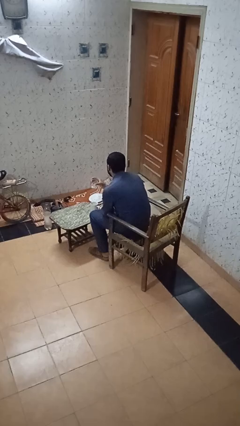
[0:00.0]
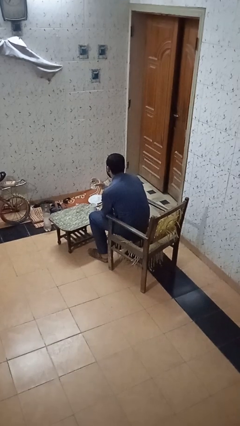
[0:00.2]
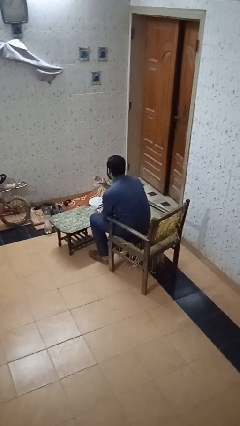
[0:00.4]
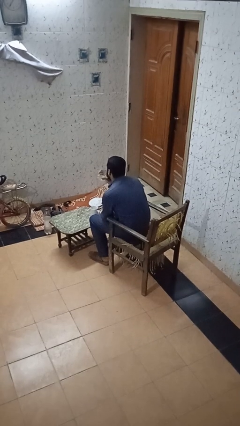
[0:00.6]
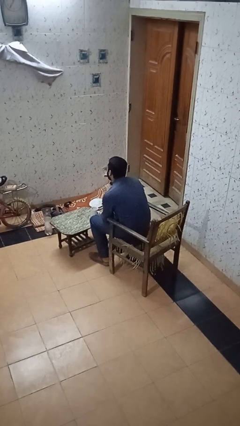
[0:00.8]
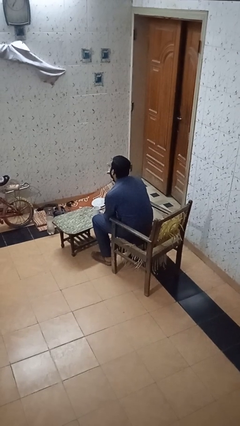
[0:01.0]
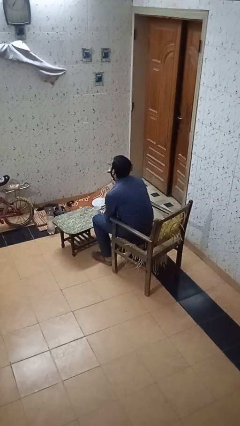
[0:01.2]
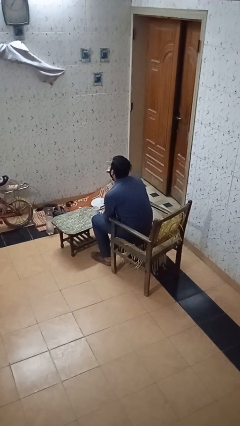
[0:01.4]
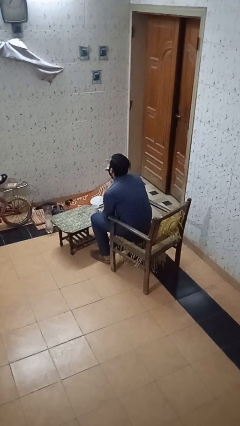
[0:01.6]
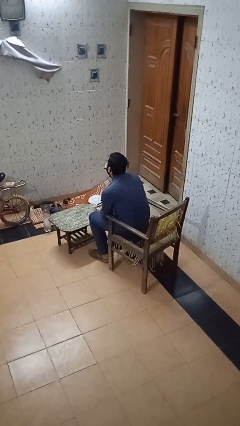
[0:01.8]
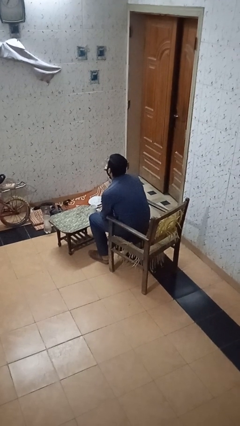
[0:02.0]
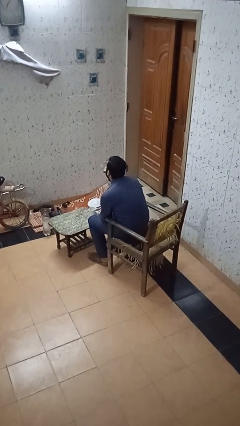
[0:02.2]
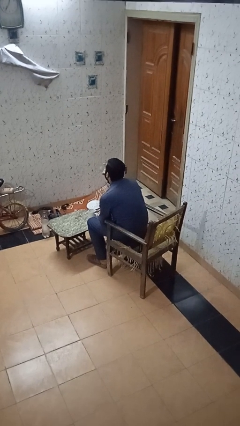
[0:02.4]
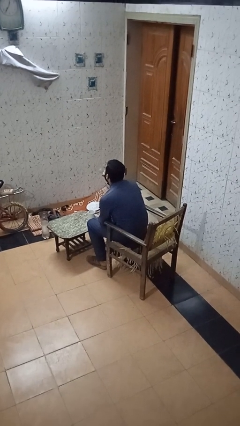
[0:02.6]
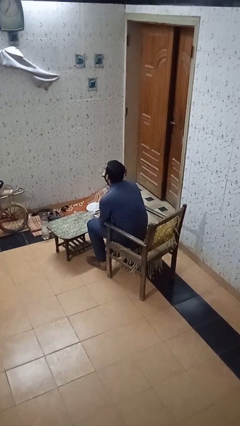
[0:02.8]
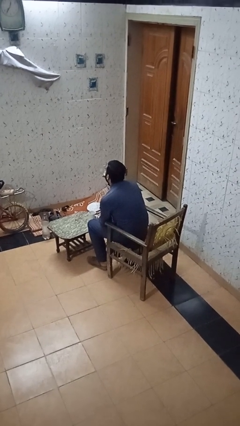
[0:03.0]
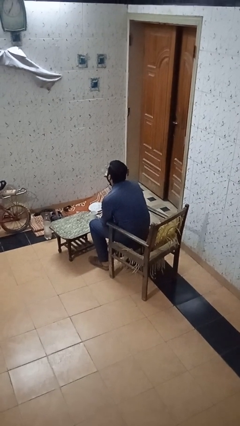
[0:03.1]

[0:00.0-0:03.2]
person drinks from shotglass

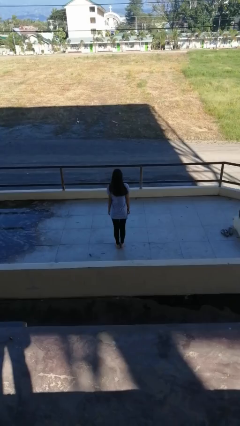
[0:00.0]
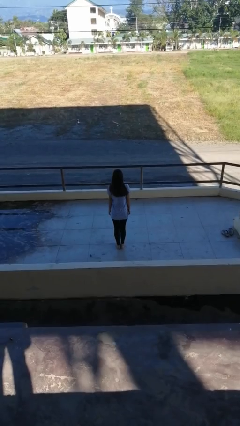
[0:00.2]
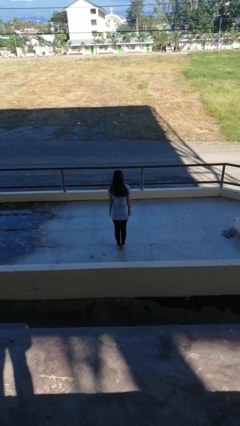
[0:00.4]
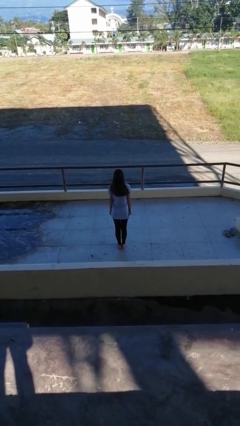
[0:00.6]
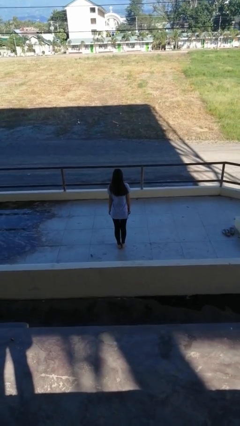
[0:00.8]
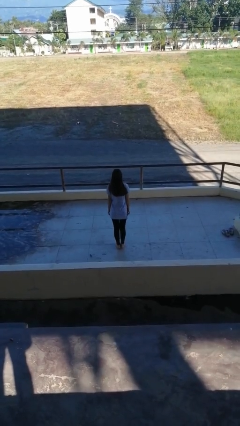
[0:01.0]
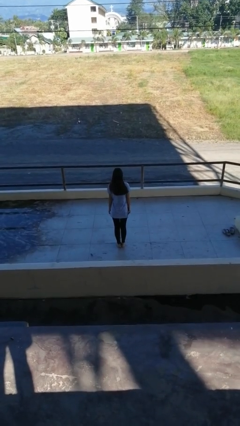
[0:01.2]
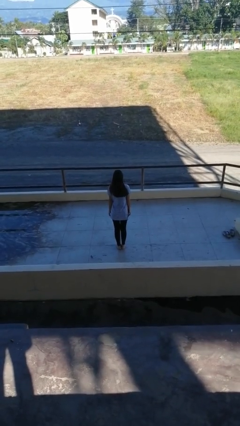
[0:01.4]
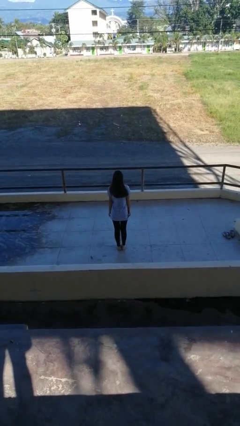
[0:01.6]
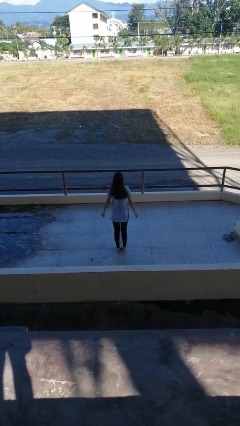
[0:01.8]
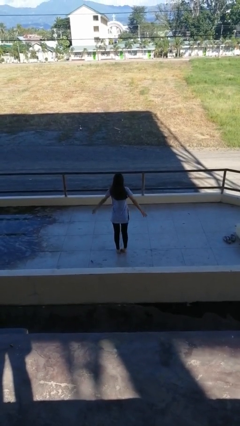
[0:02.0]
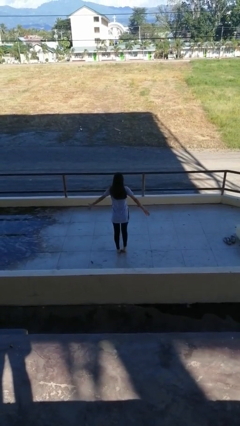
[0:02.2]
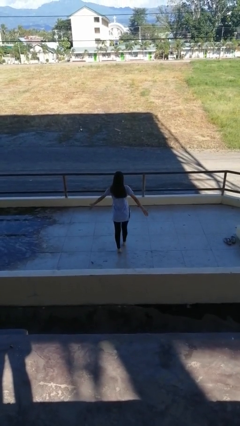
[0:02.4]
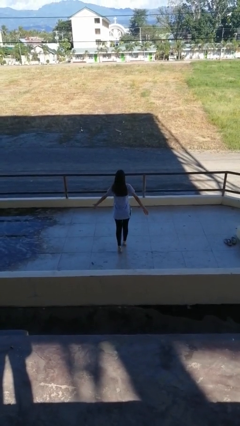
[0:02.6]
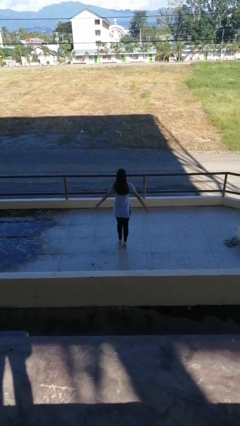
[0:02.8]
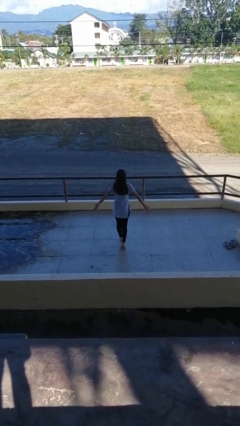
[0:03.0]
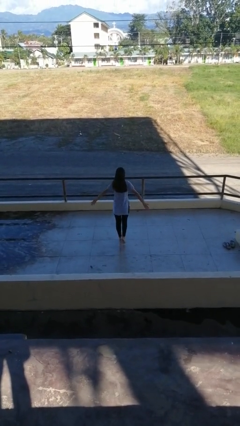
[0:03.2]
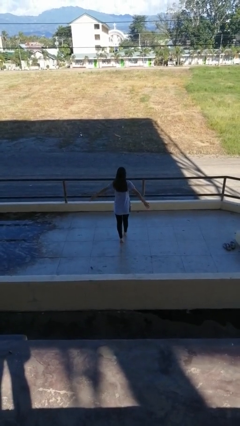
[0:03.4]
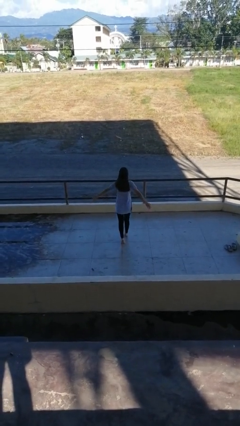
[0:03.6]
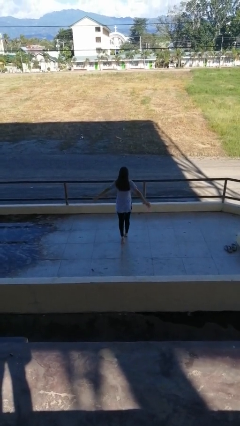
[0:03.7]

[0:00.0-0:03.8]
person walks tiptoe

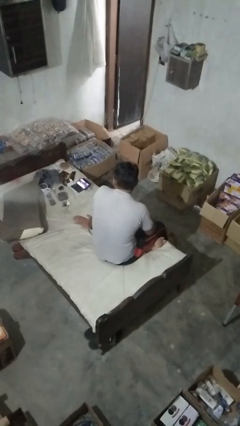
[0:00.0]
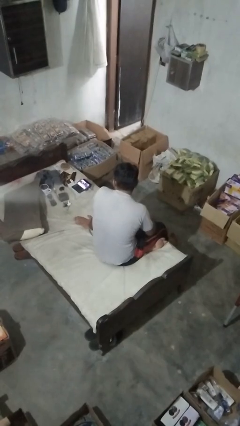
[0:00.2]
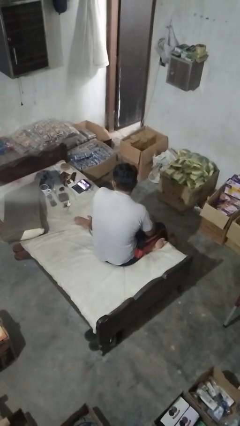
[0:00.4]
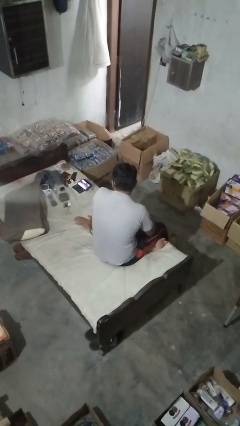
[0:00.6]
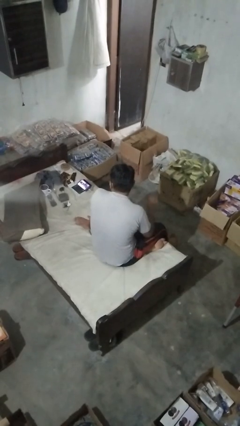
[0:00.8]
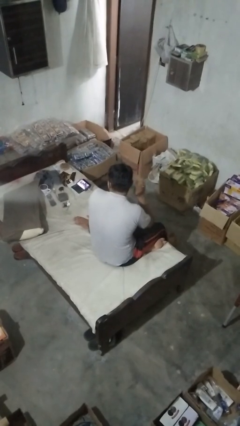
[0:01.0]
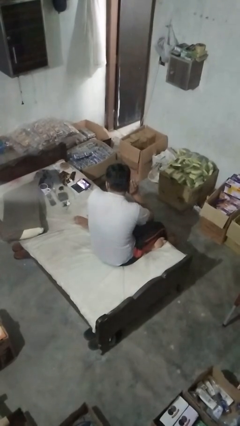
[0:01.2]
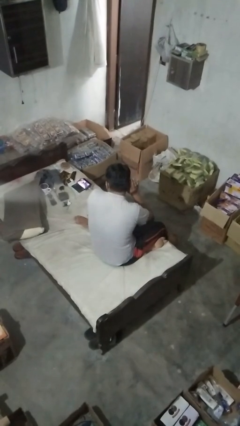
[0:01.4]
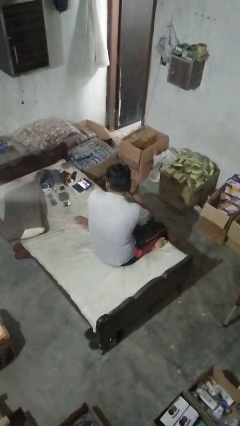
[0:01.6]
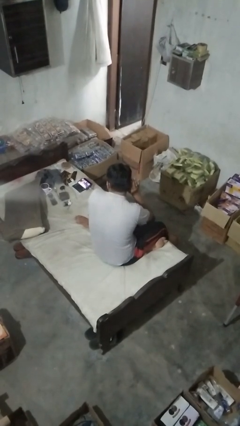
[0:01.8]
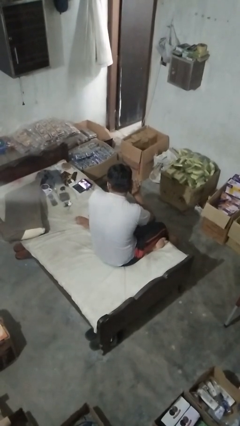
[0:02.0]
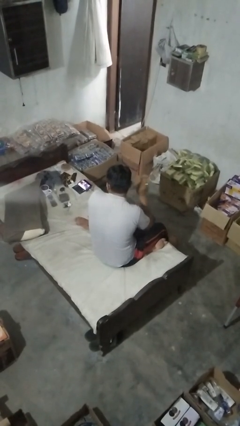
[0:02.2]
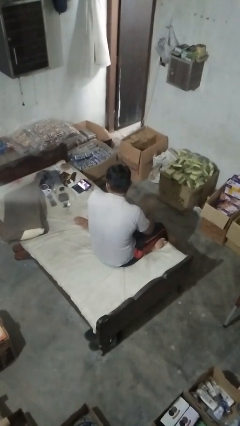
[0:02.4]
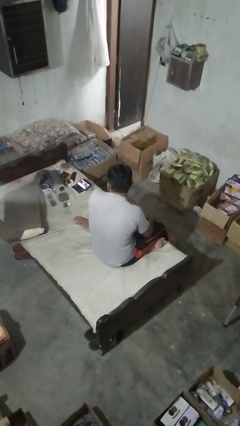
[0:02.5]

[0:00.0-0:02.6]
person gestures listen closely

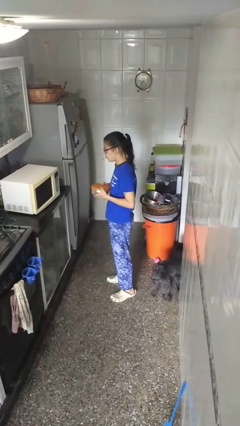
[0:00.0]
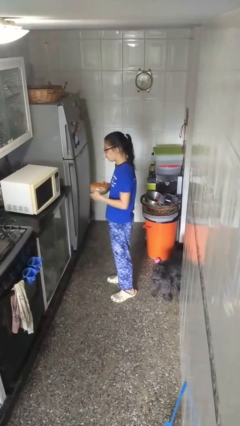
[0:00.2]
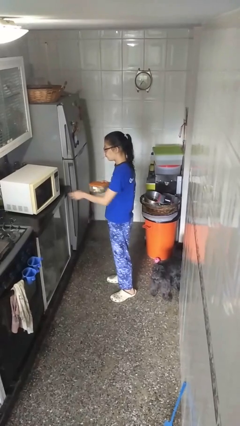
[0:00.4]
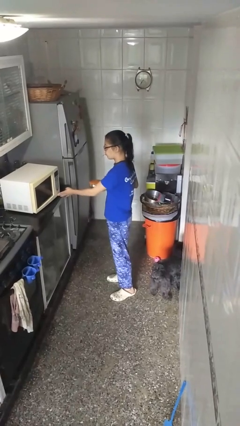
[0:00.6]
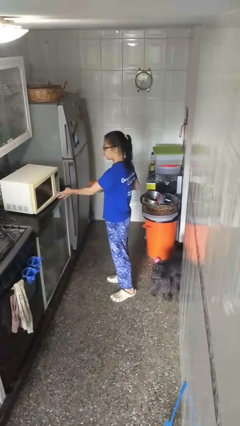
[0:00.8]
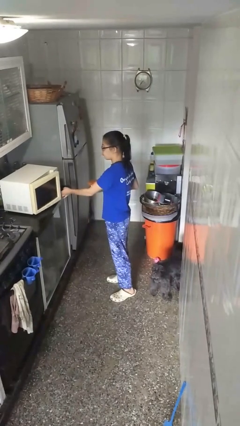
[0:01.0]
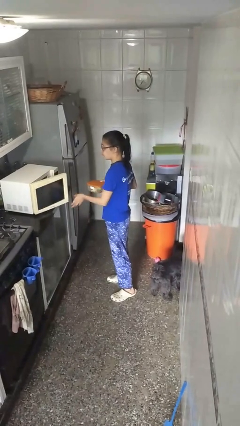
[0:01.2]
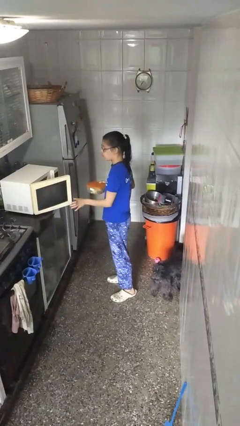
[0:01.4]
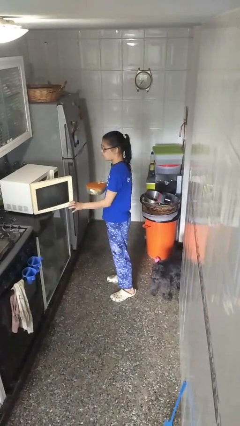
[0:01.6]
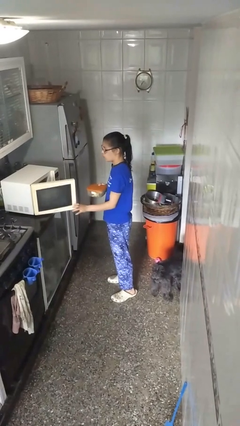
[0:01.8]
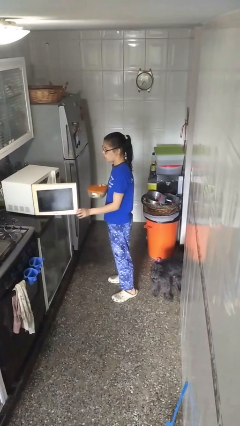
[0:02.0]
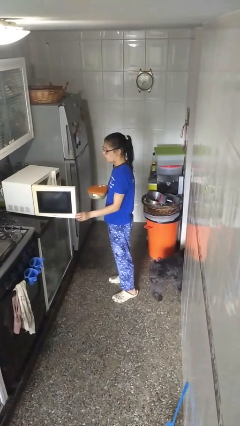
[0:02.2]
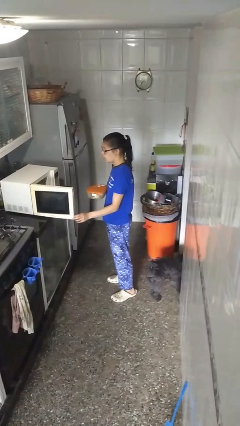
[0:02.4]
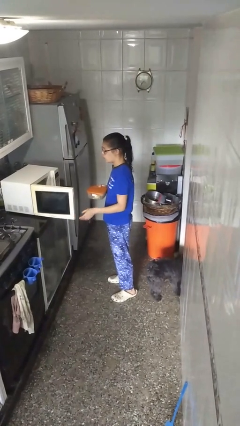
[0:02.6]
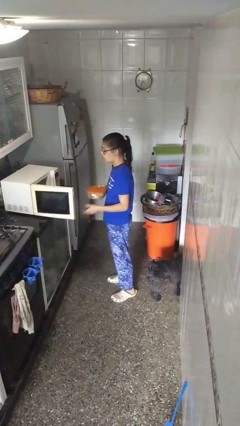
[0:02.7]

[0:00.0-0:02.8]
person opens microwave

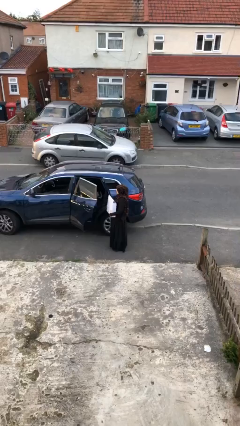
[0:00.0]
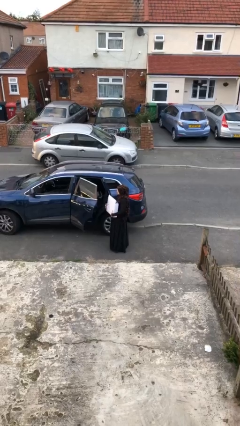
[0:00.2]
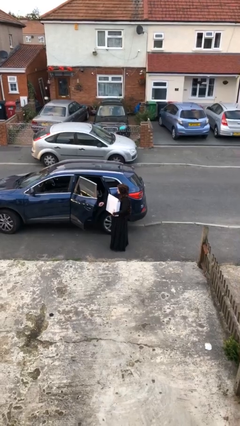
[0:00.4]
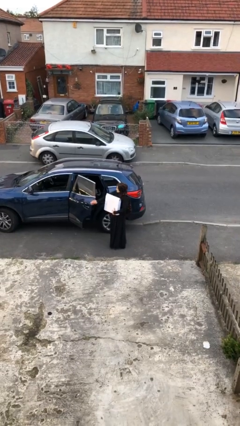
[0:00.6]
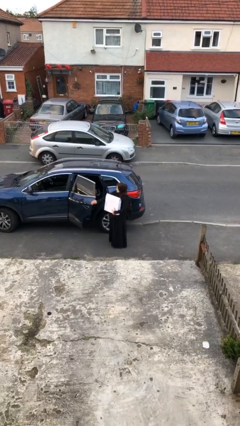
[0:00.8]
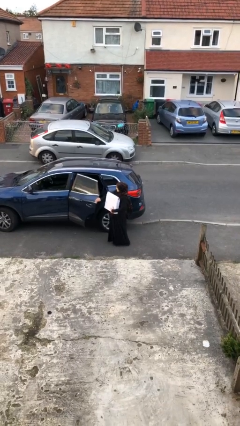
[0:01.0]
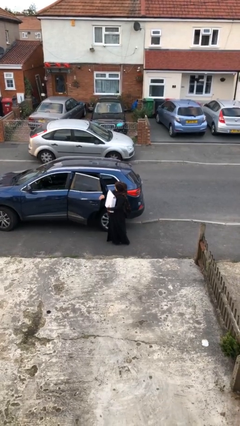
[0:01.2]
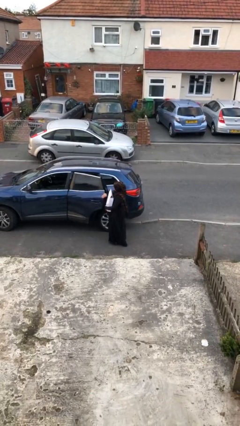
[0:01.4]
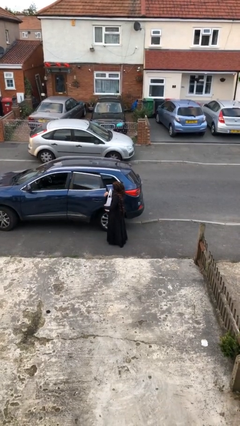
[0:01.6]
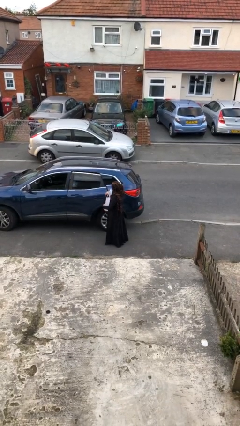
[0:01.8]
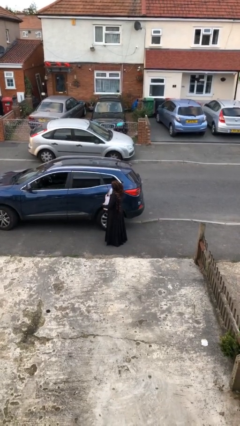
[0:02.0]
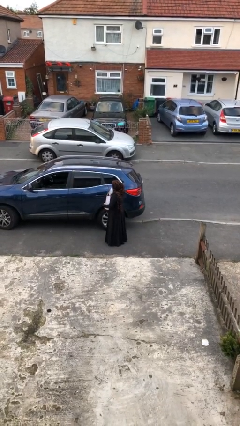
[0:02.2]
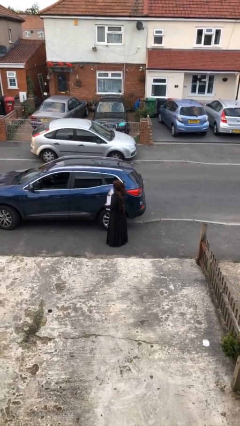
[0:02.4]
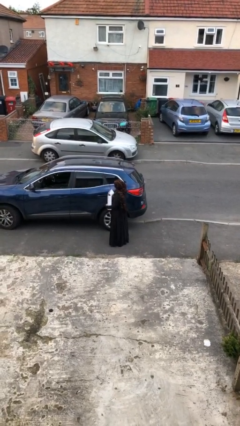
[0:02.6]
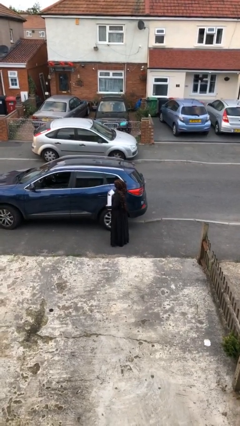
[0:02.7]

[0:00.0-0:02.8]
person closes car door

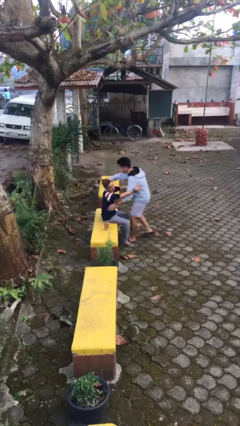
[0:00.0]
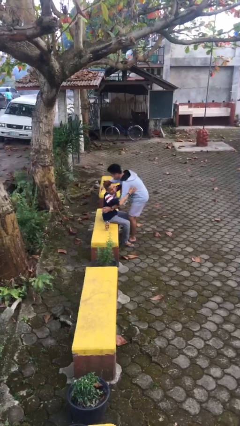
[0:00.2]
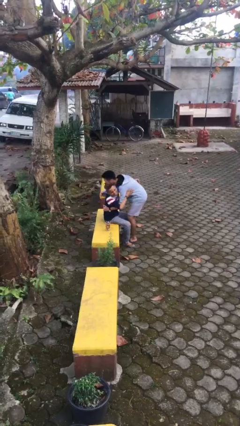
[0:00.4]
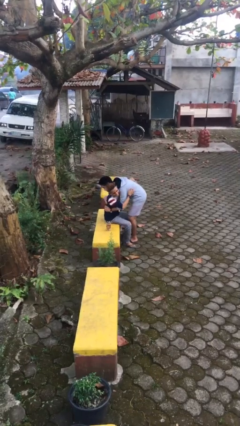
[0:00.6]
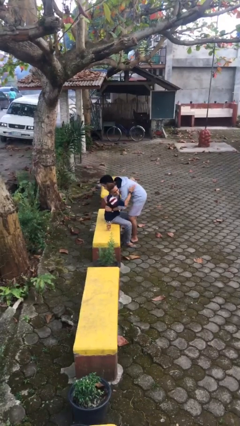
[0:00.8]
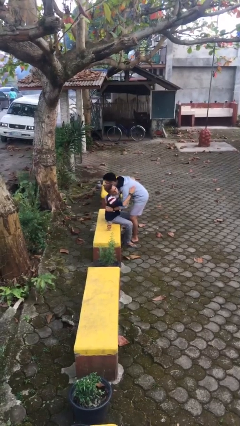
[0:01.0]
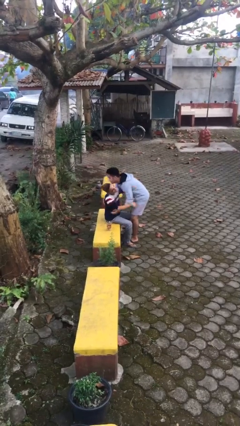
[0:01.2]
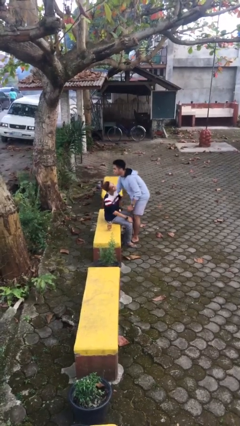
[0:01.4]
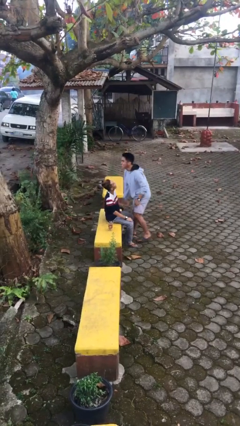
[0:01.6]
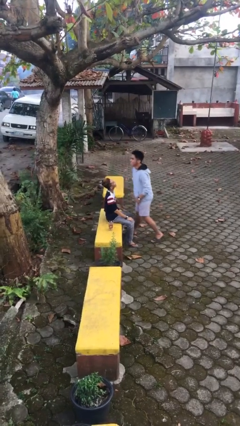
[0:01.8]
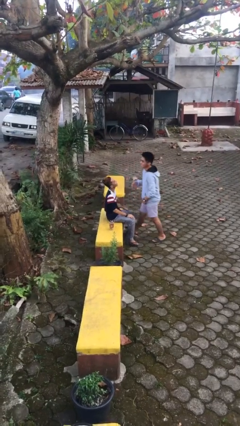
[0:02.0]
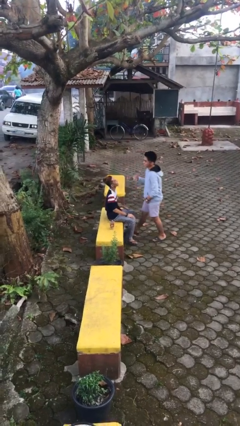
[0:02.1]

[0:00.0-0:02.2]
person embraces person
